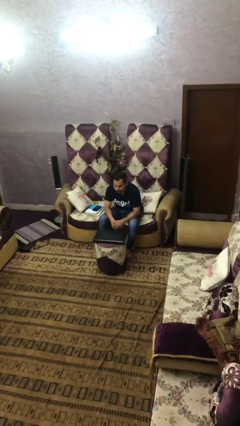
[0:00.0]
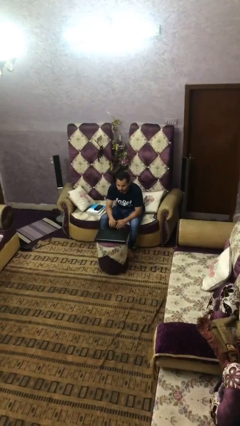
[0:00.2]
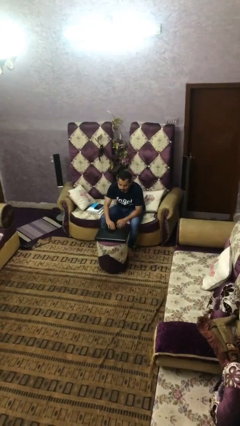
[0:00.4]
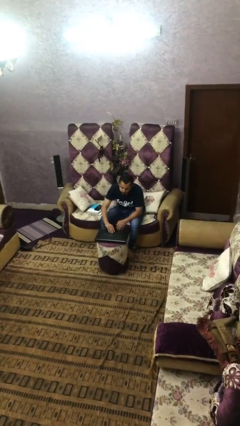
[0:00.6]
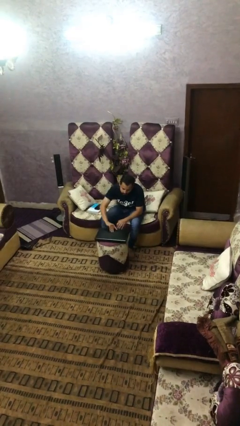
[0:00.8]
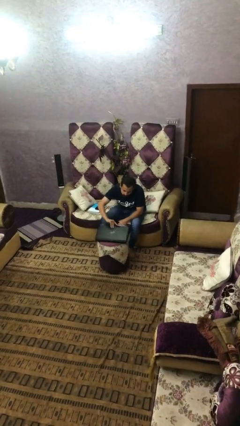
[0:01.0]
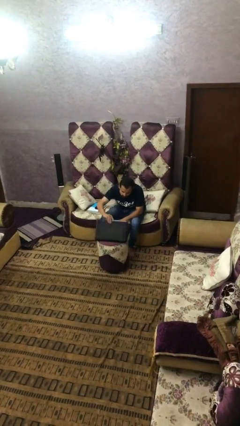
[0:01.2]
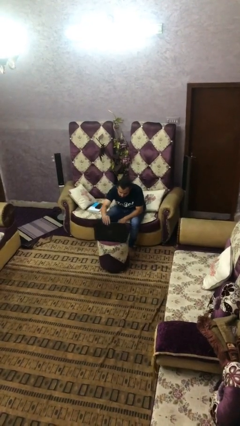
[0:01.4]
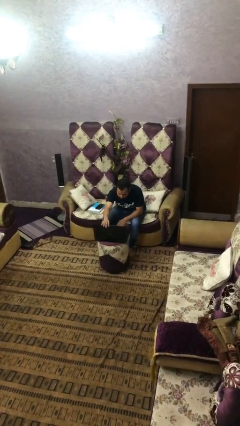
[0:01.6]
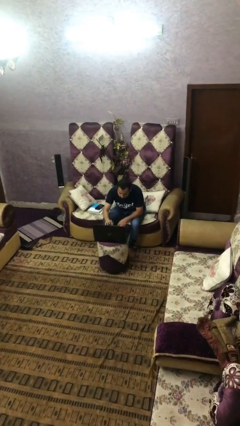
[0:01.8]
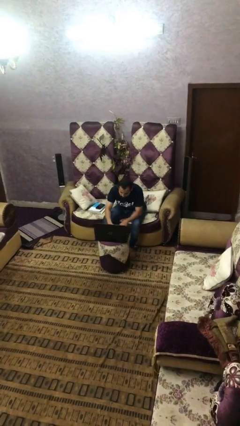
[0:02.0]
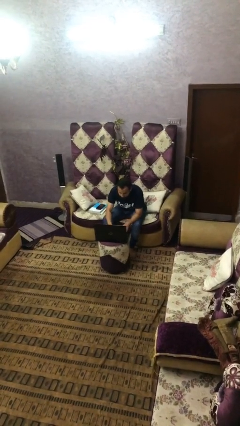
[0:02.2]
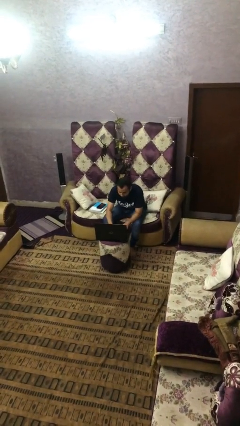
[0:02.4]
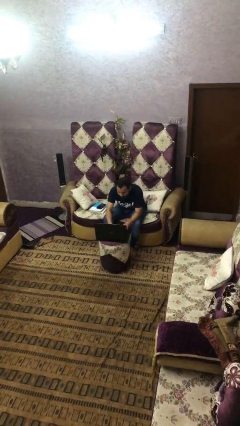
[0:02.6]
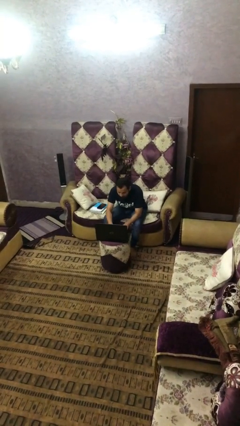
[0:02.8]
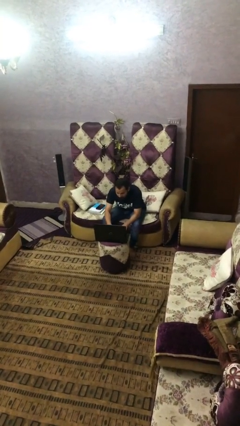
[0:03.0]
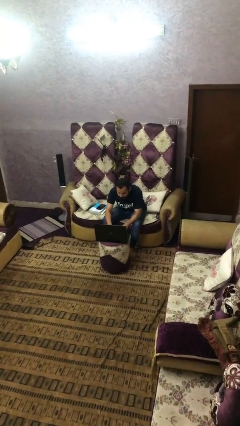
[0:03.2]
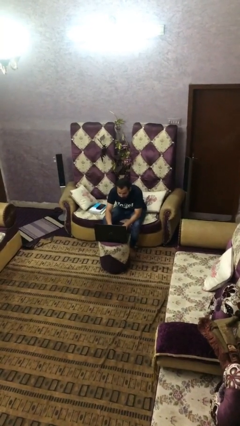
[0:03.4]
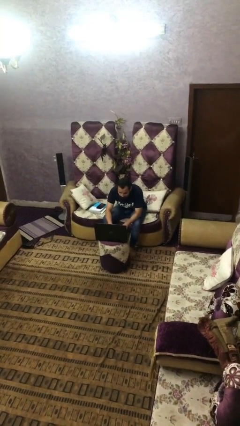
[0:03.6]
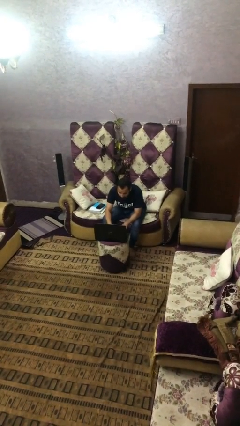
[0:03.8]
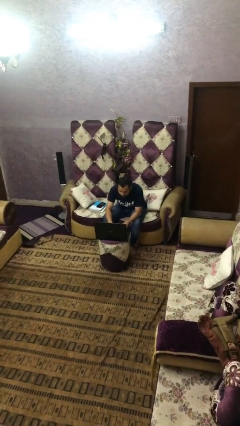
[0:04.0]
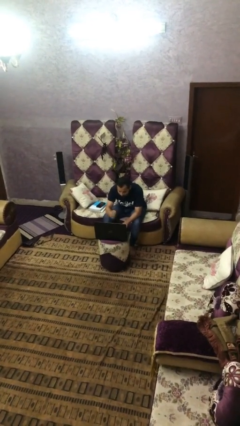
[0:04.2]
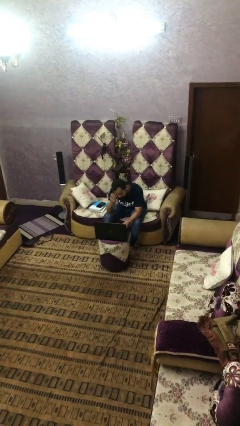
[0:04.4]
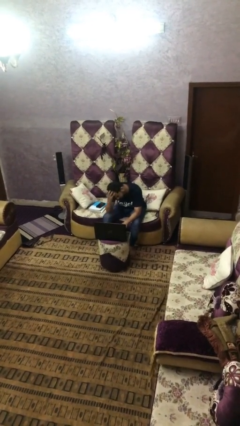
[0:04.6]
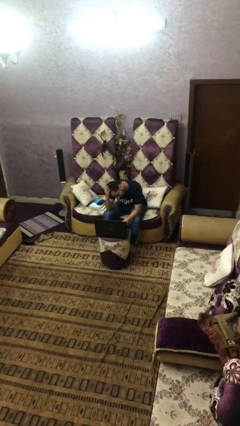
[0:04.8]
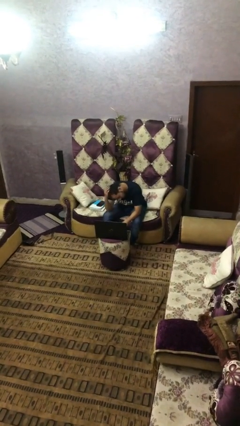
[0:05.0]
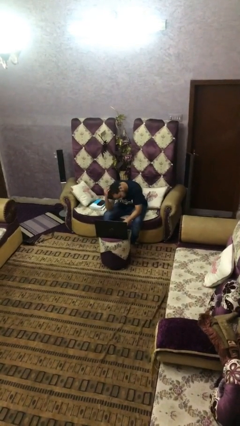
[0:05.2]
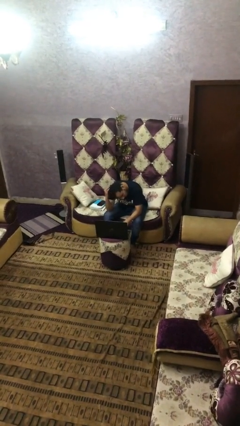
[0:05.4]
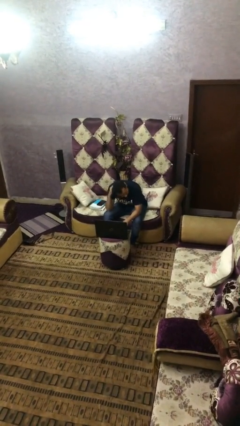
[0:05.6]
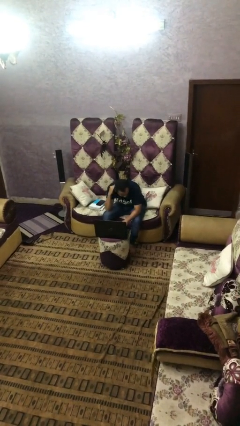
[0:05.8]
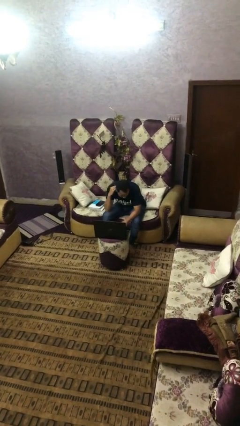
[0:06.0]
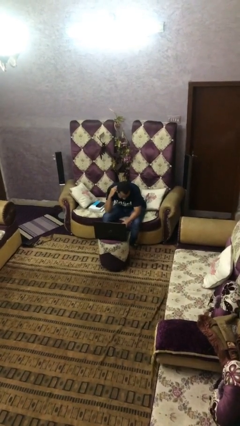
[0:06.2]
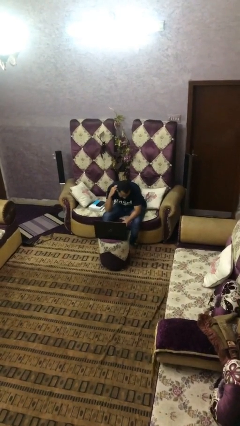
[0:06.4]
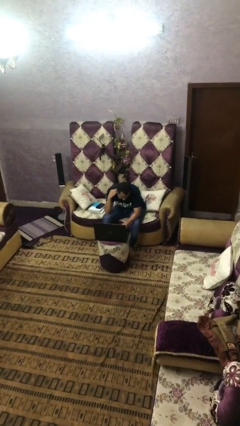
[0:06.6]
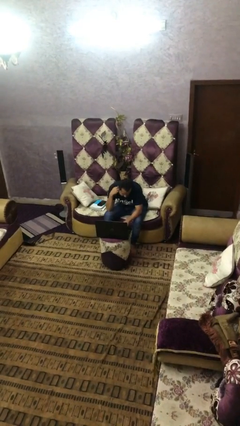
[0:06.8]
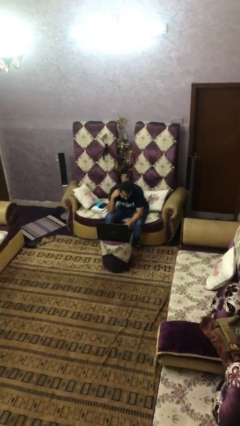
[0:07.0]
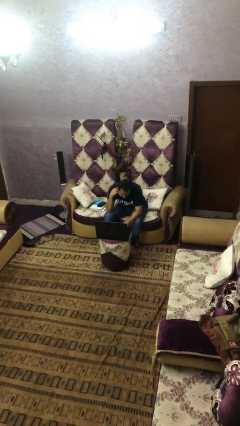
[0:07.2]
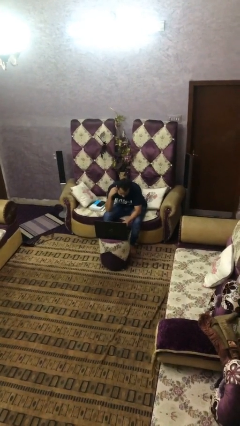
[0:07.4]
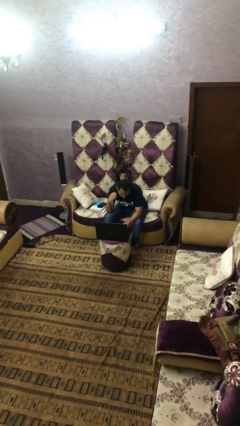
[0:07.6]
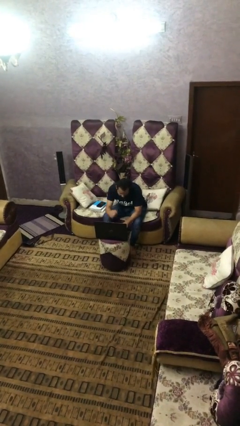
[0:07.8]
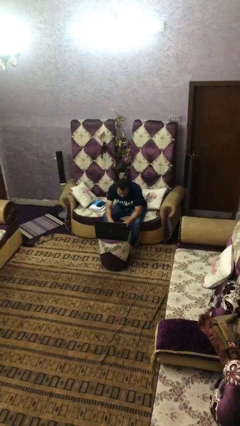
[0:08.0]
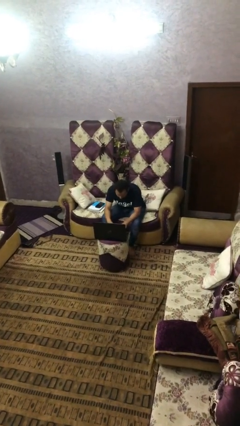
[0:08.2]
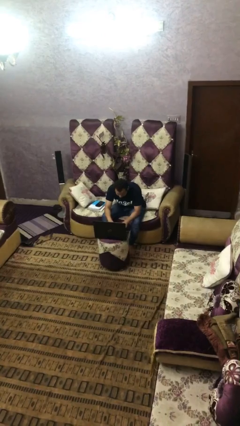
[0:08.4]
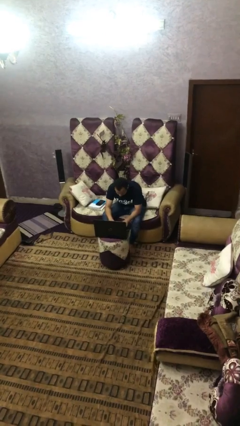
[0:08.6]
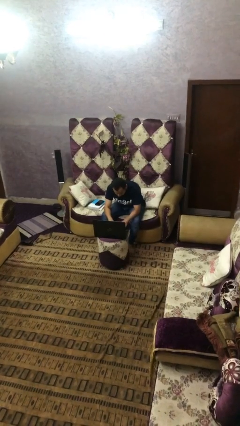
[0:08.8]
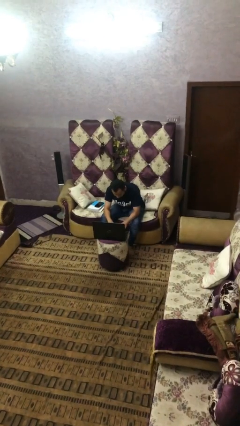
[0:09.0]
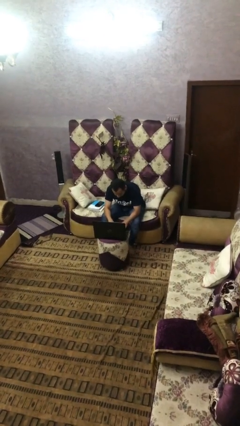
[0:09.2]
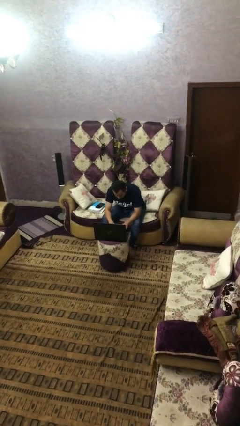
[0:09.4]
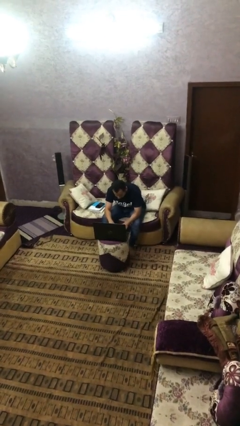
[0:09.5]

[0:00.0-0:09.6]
person interacts with laptop

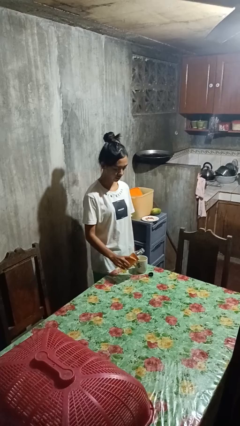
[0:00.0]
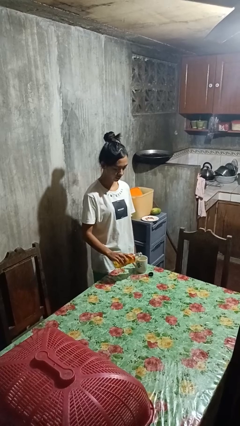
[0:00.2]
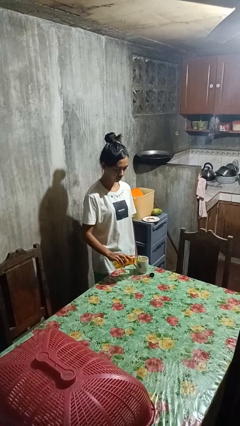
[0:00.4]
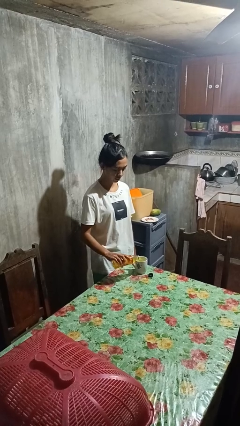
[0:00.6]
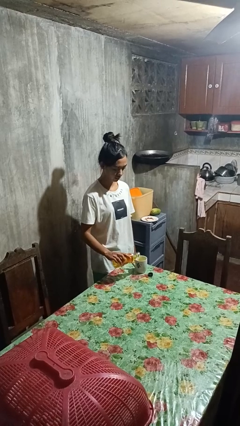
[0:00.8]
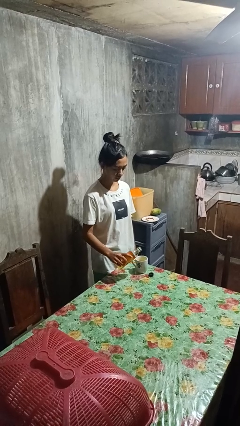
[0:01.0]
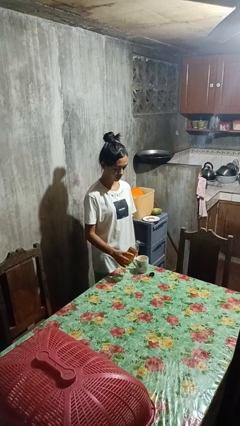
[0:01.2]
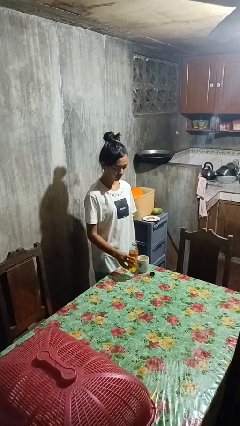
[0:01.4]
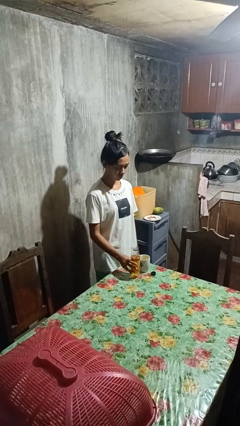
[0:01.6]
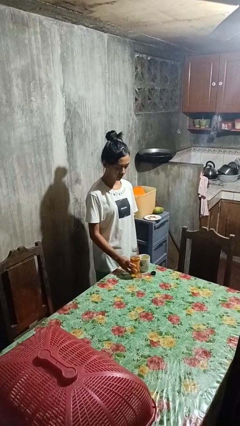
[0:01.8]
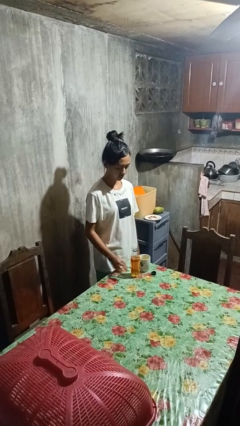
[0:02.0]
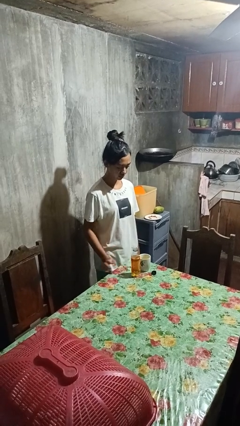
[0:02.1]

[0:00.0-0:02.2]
person pours liquid into cup

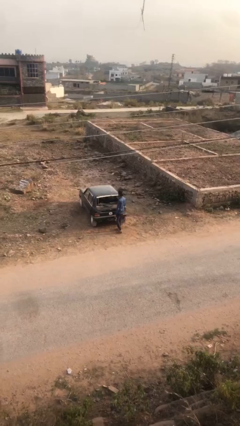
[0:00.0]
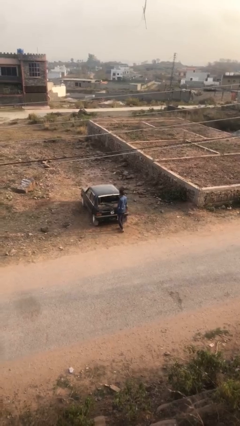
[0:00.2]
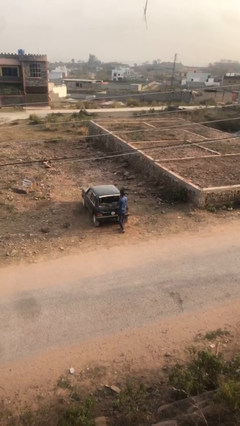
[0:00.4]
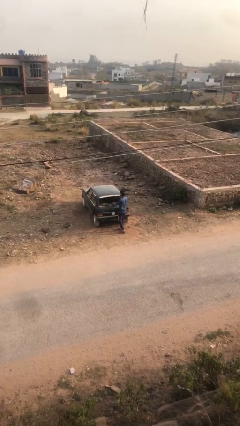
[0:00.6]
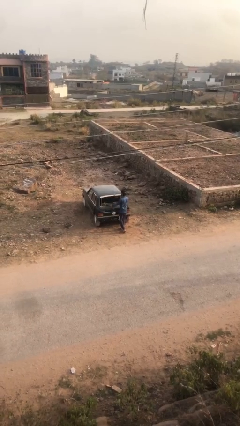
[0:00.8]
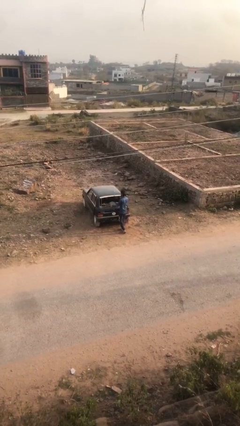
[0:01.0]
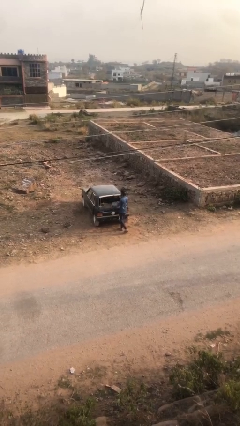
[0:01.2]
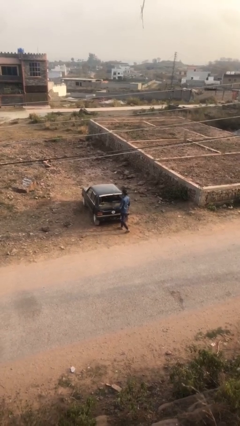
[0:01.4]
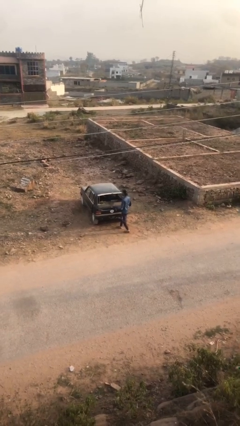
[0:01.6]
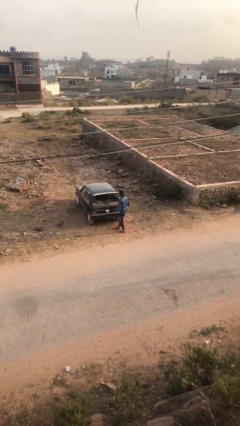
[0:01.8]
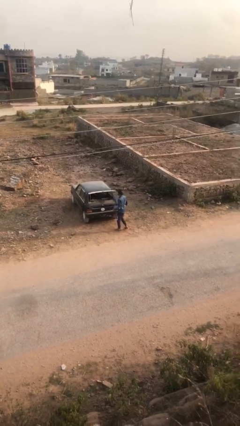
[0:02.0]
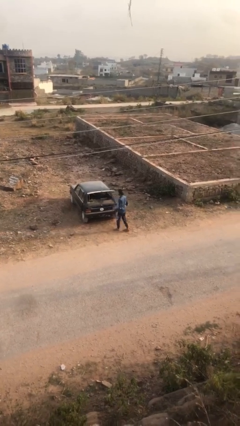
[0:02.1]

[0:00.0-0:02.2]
person unloads car

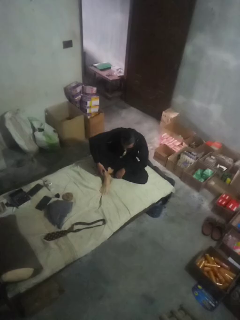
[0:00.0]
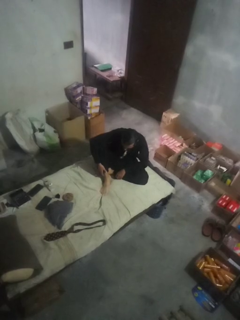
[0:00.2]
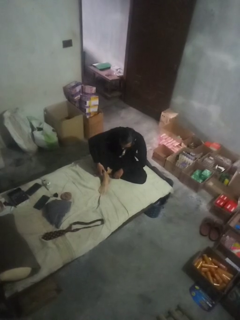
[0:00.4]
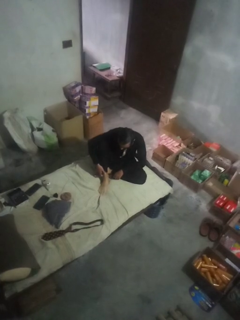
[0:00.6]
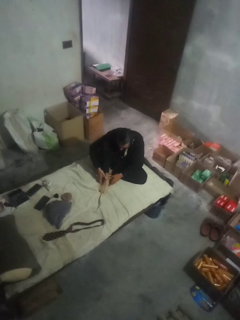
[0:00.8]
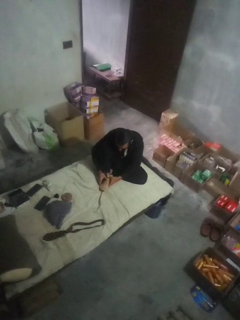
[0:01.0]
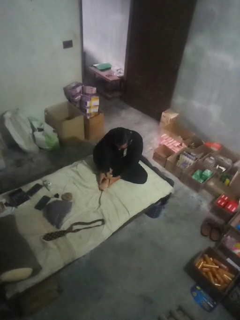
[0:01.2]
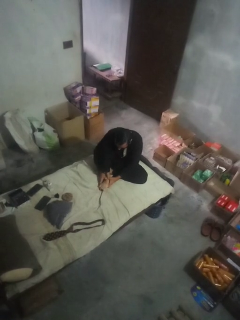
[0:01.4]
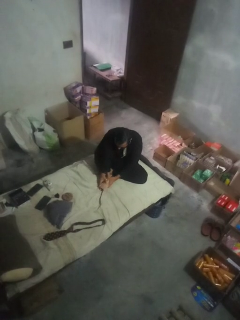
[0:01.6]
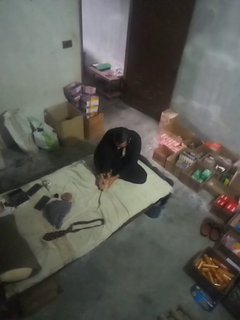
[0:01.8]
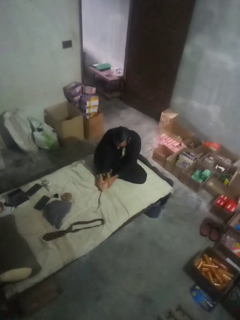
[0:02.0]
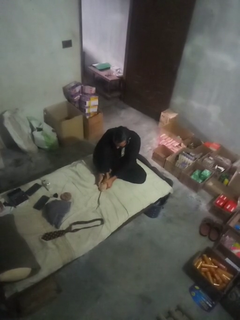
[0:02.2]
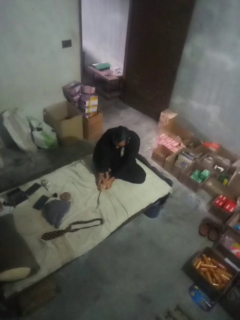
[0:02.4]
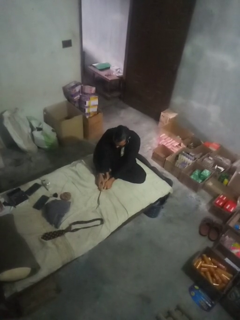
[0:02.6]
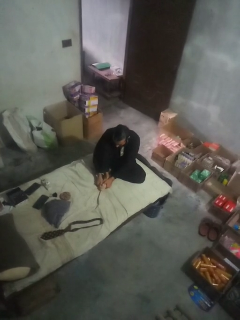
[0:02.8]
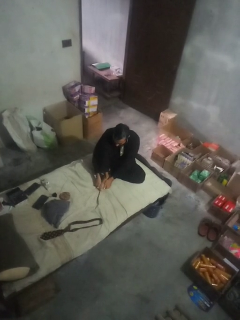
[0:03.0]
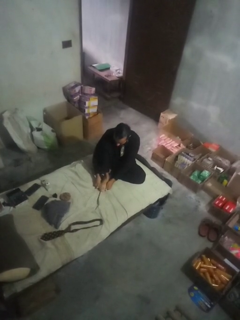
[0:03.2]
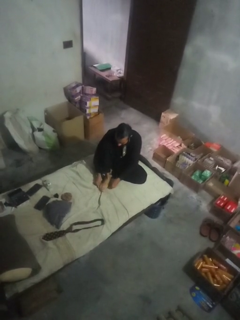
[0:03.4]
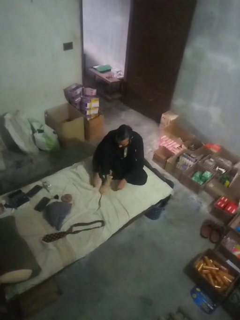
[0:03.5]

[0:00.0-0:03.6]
person rubs foot

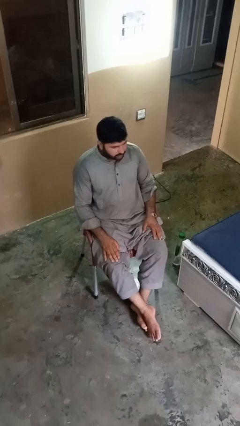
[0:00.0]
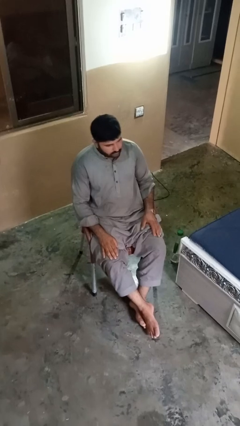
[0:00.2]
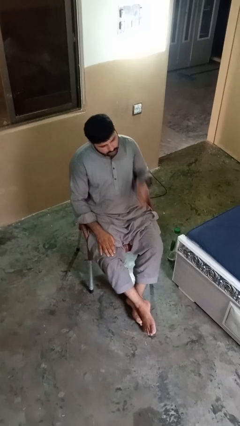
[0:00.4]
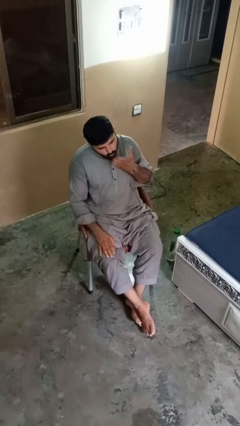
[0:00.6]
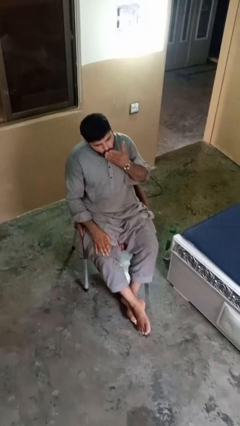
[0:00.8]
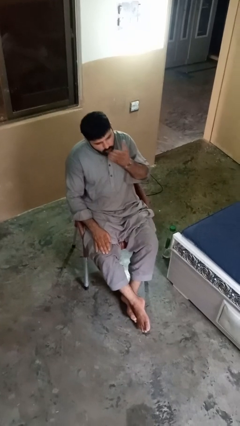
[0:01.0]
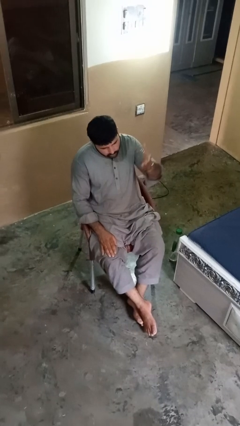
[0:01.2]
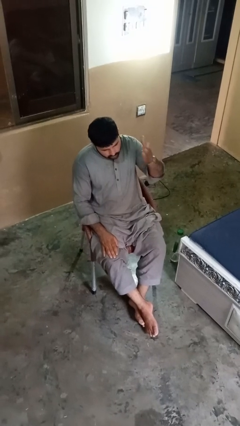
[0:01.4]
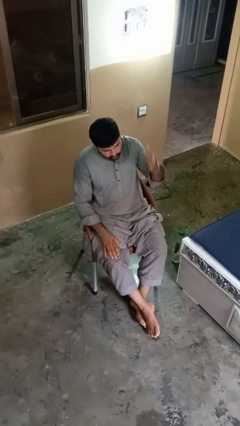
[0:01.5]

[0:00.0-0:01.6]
person gestures blow kiss
